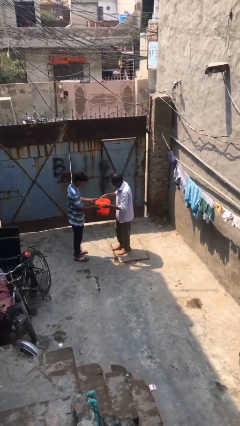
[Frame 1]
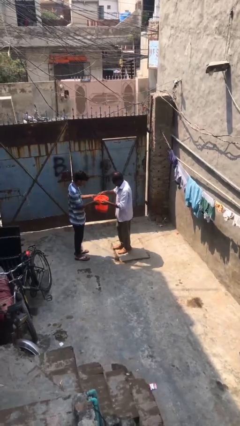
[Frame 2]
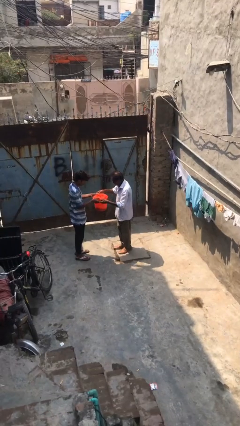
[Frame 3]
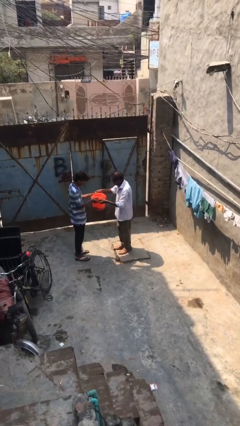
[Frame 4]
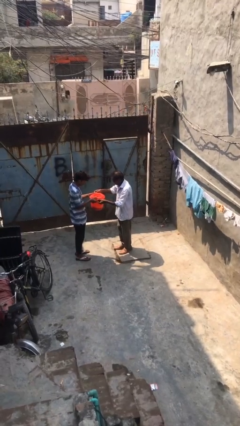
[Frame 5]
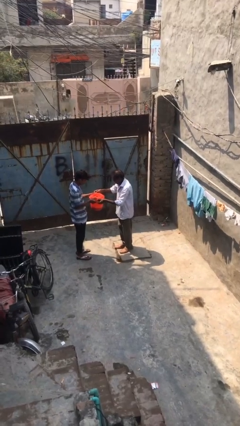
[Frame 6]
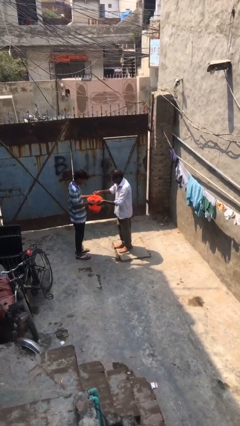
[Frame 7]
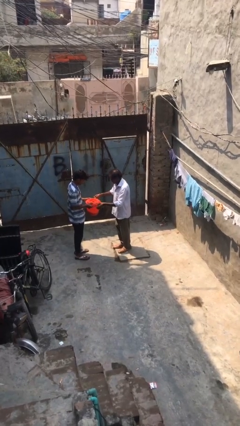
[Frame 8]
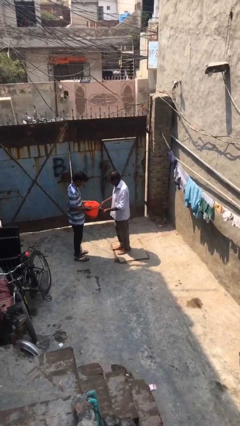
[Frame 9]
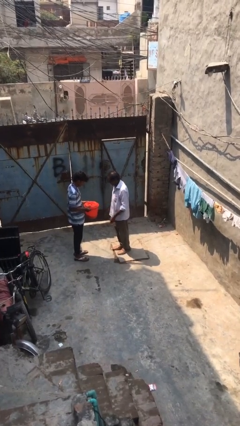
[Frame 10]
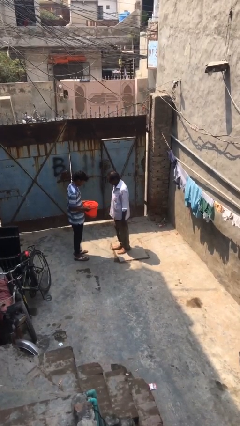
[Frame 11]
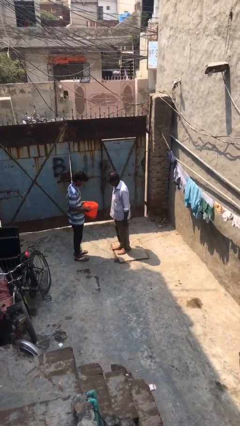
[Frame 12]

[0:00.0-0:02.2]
person transfers object to person

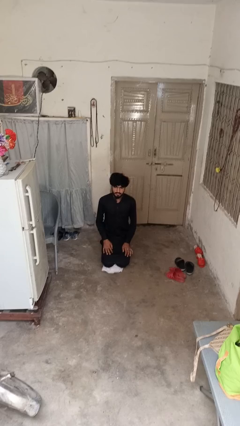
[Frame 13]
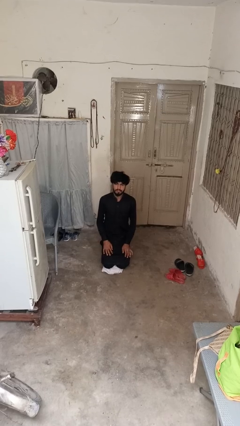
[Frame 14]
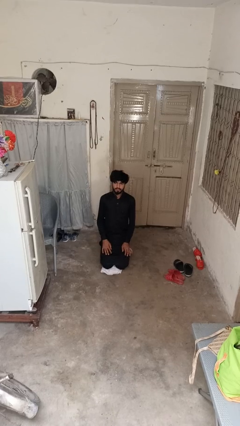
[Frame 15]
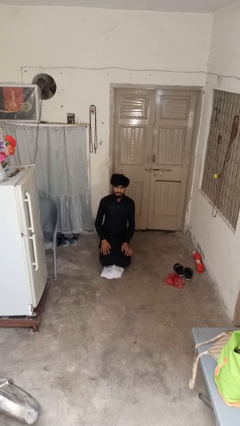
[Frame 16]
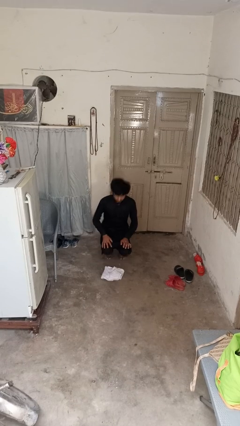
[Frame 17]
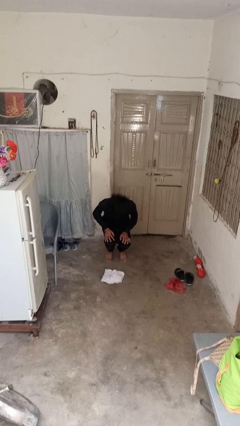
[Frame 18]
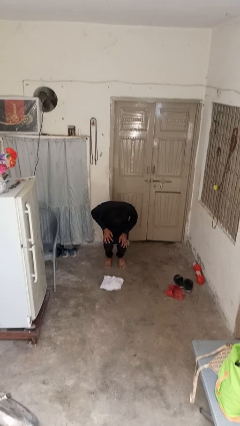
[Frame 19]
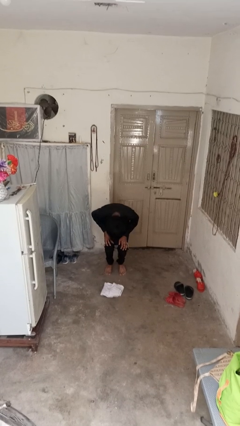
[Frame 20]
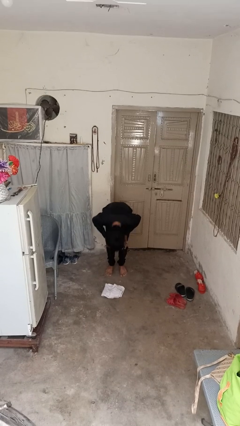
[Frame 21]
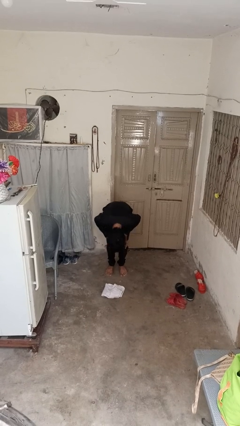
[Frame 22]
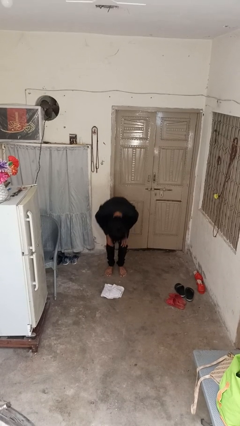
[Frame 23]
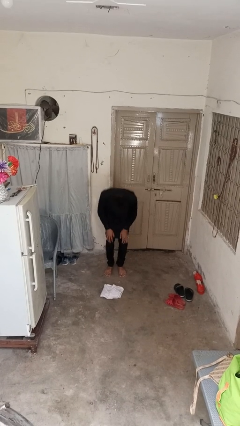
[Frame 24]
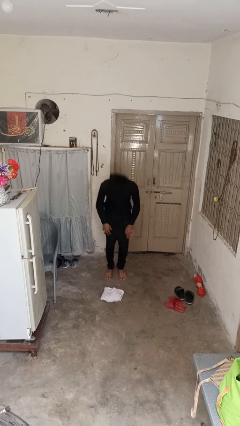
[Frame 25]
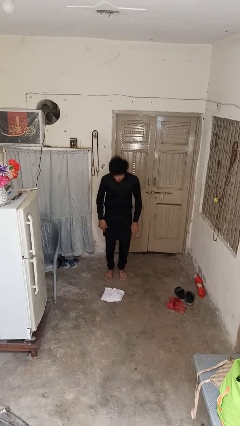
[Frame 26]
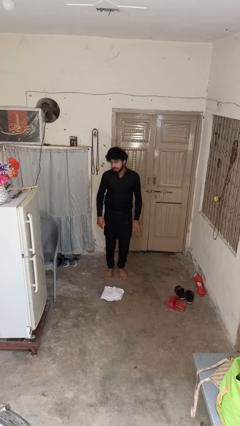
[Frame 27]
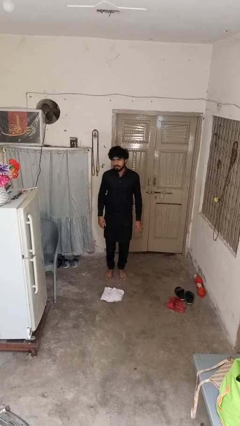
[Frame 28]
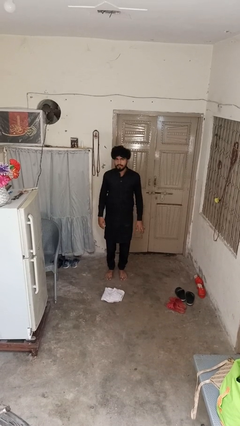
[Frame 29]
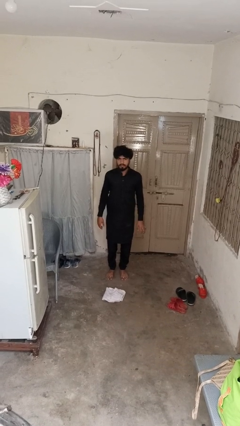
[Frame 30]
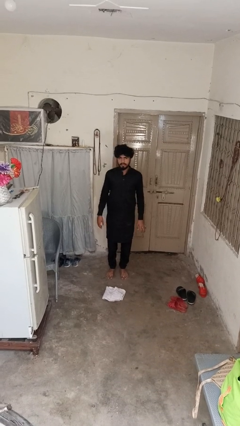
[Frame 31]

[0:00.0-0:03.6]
person stands up from floor

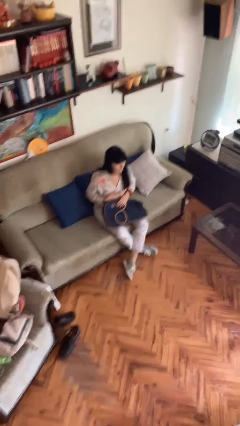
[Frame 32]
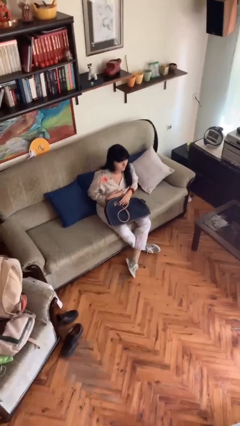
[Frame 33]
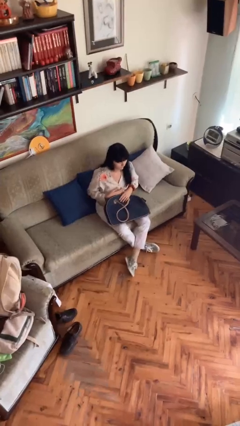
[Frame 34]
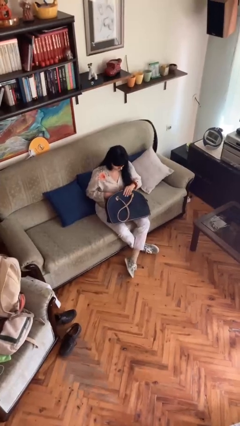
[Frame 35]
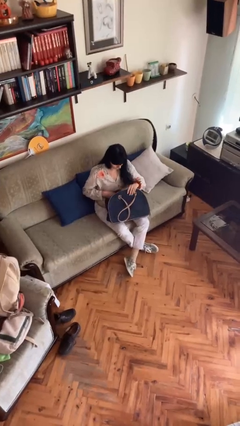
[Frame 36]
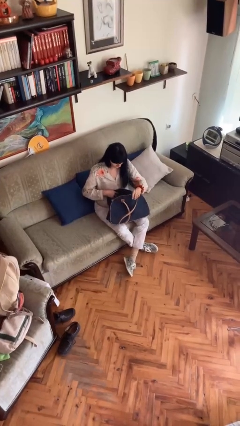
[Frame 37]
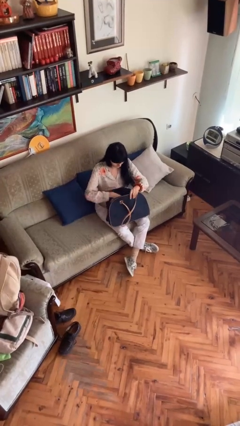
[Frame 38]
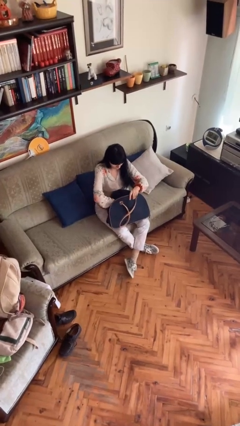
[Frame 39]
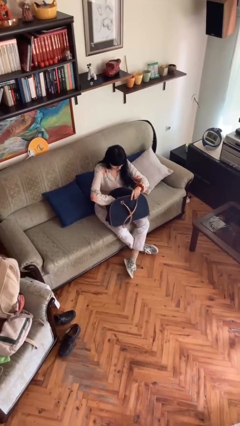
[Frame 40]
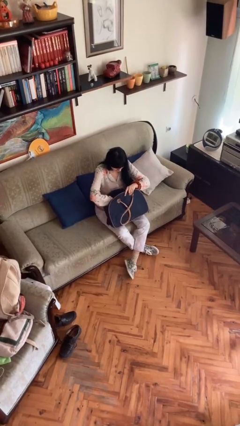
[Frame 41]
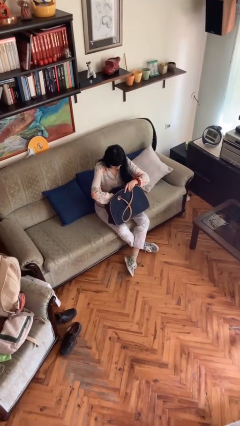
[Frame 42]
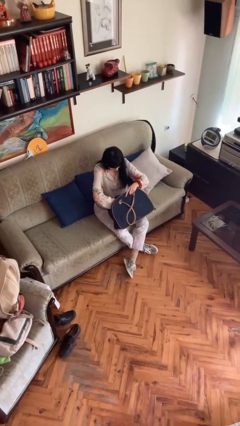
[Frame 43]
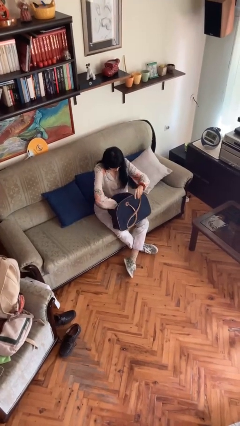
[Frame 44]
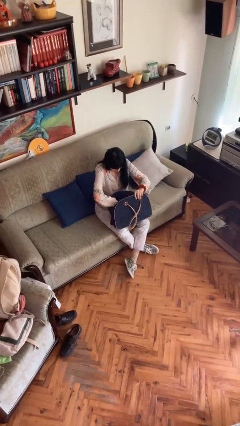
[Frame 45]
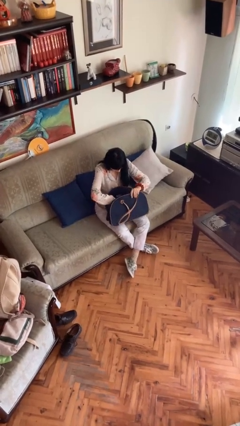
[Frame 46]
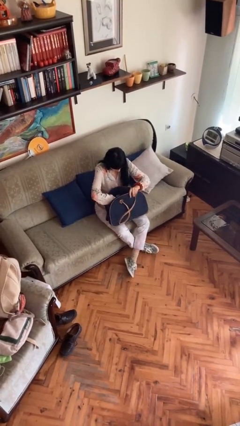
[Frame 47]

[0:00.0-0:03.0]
person searches in purse

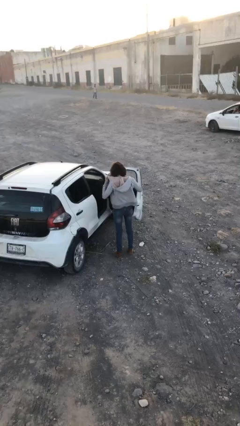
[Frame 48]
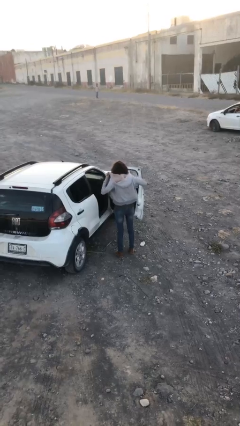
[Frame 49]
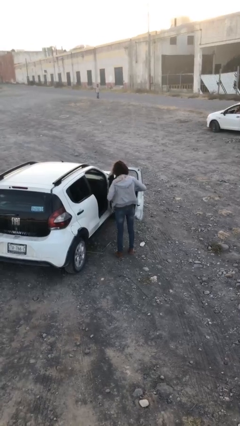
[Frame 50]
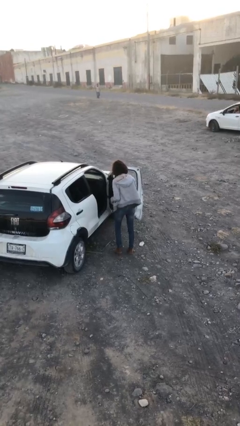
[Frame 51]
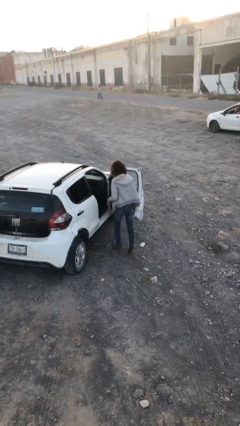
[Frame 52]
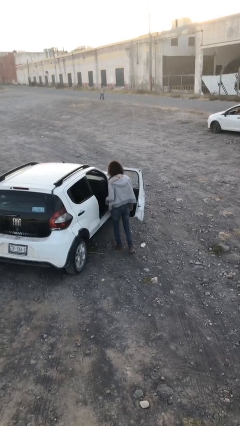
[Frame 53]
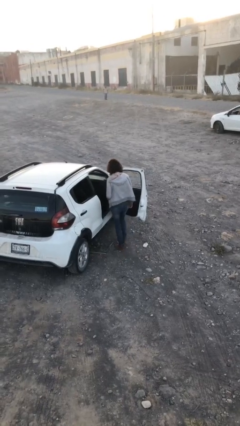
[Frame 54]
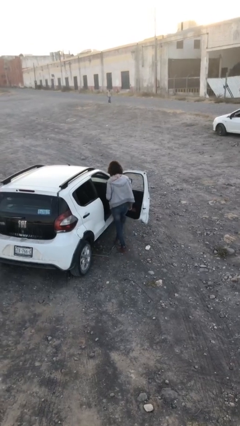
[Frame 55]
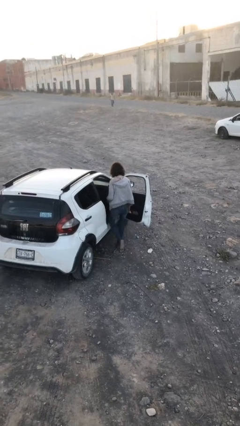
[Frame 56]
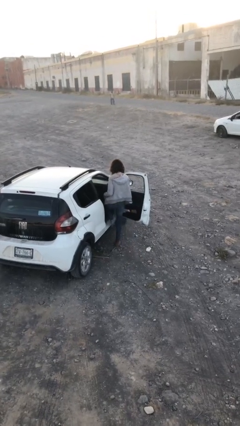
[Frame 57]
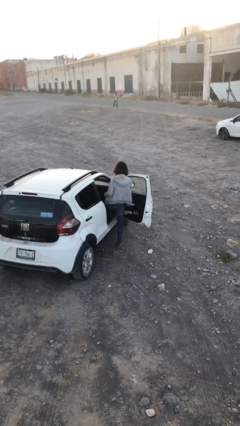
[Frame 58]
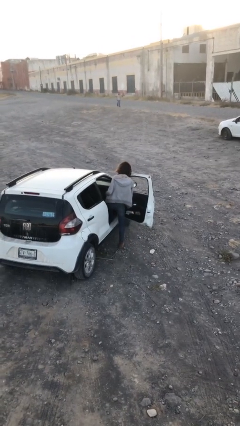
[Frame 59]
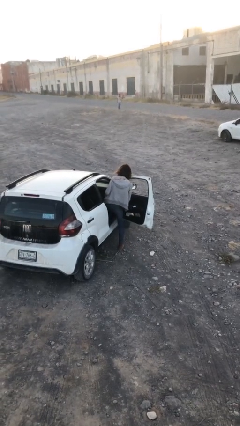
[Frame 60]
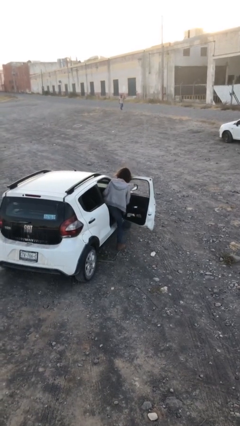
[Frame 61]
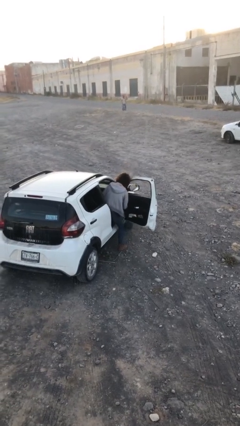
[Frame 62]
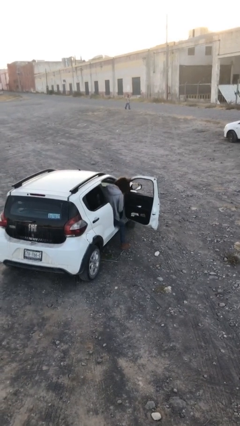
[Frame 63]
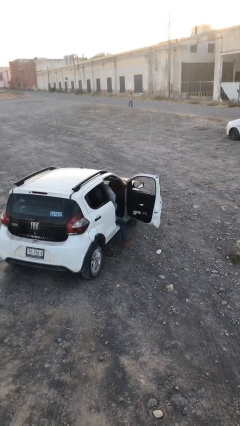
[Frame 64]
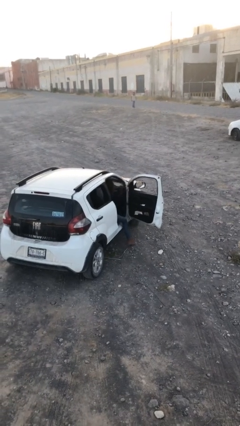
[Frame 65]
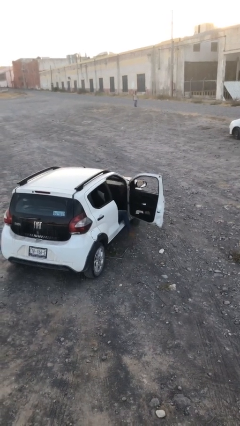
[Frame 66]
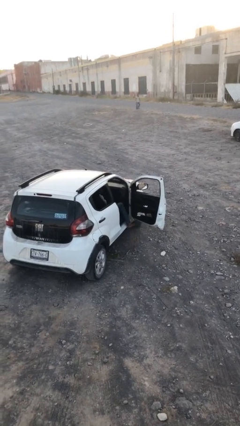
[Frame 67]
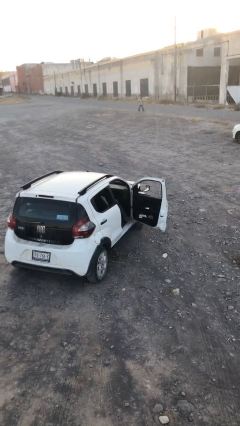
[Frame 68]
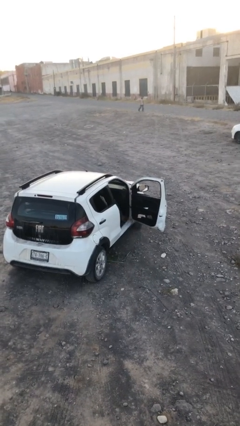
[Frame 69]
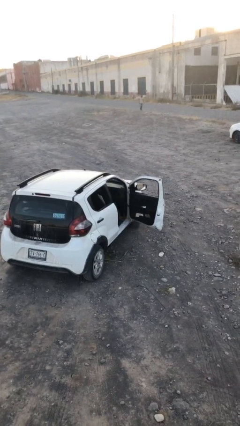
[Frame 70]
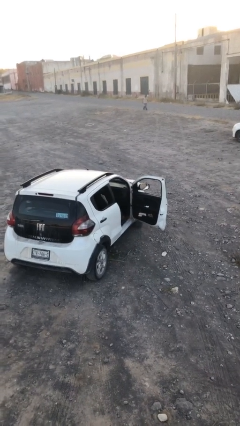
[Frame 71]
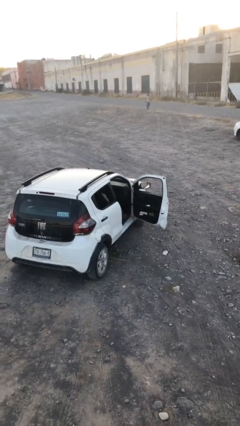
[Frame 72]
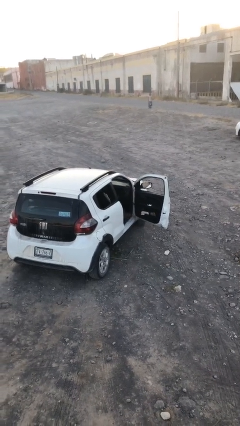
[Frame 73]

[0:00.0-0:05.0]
person enters car

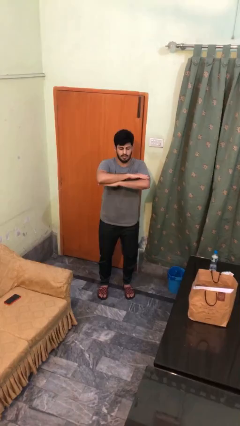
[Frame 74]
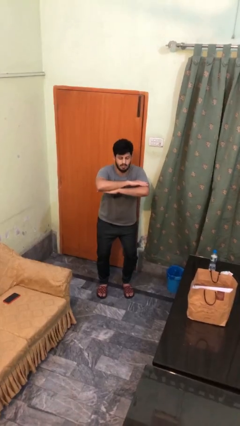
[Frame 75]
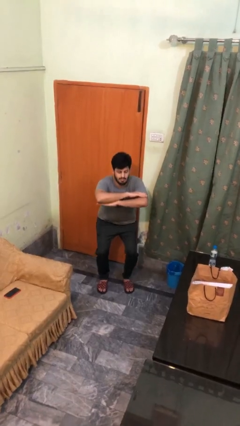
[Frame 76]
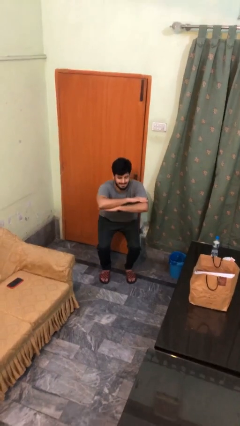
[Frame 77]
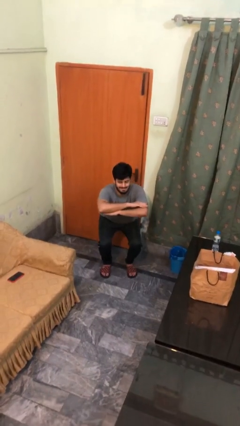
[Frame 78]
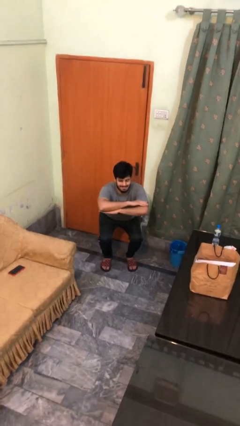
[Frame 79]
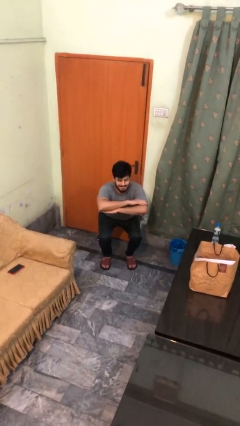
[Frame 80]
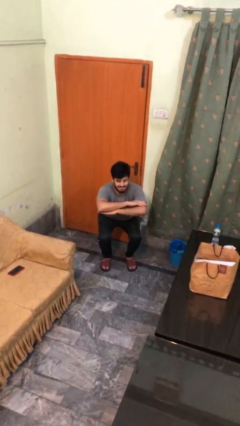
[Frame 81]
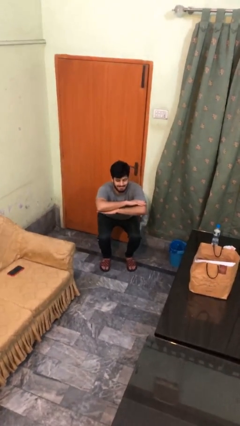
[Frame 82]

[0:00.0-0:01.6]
person squats

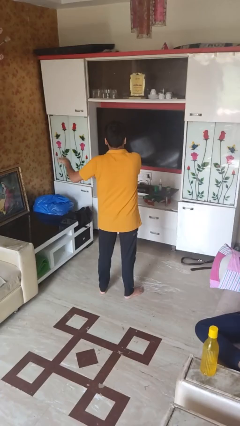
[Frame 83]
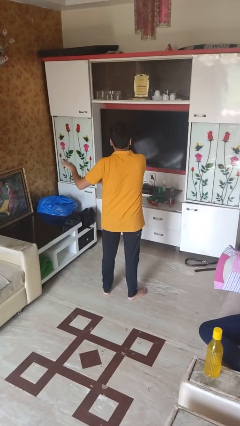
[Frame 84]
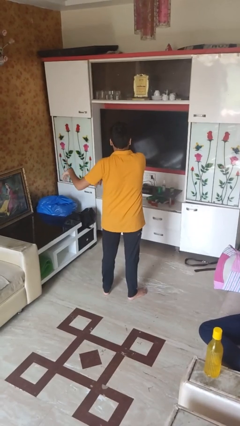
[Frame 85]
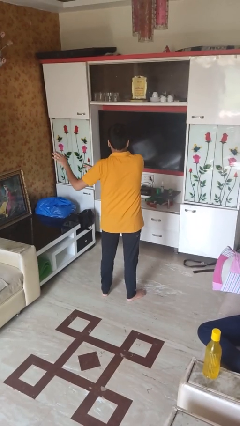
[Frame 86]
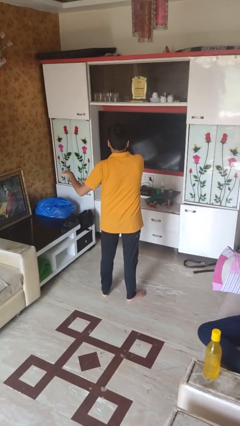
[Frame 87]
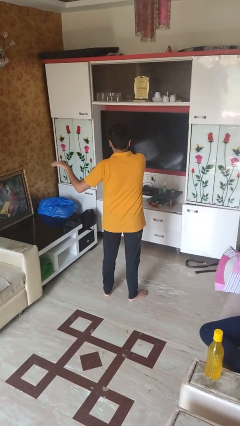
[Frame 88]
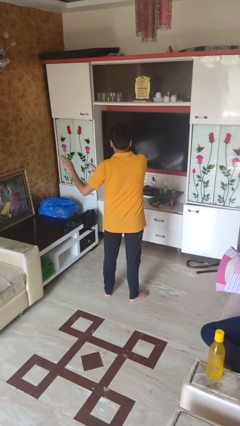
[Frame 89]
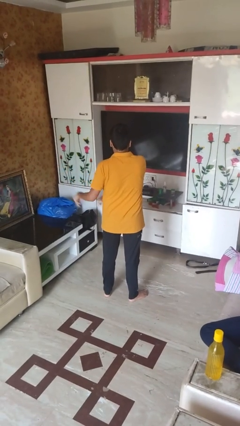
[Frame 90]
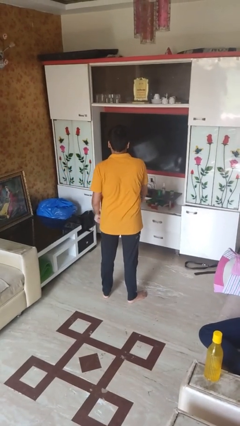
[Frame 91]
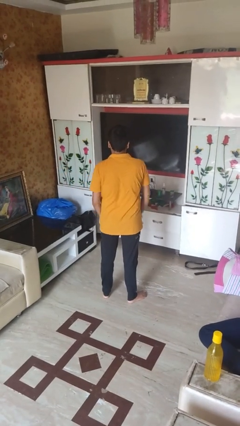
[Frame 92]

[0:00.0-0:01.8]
person dances in place

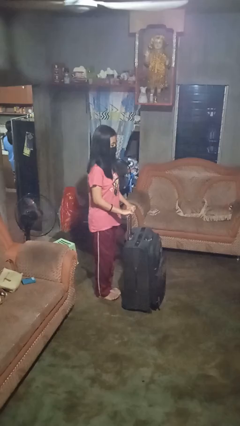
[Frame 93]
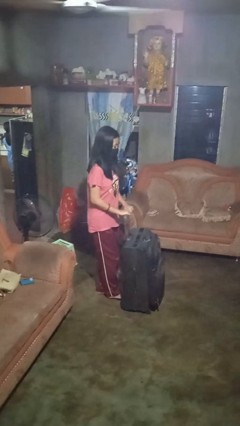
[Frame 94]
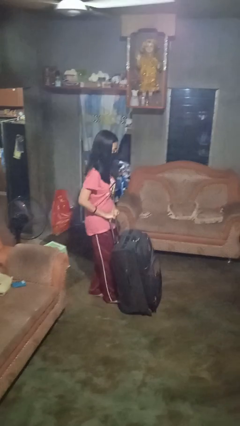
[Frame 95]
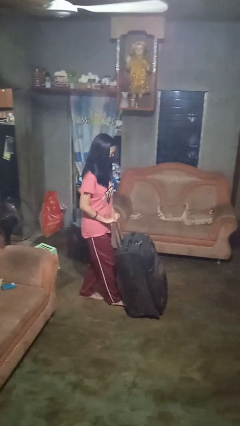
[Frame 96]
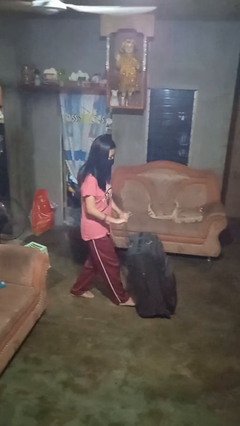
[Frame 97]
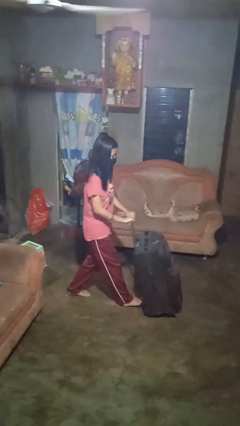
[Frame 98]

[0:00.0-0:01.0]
person pushes wheeled cart
